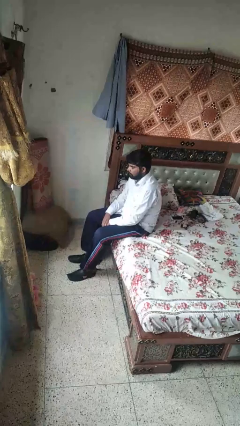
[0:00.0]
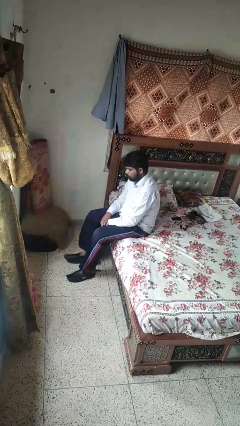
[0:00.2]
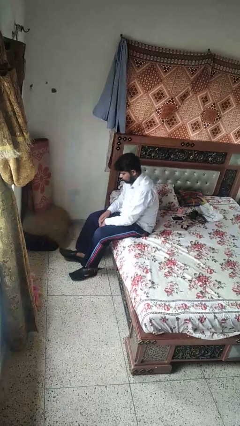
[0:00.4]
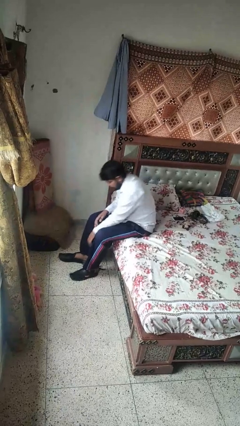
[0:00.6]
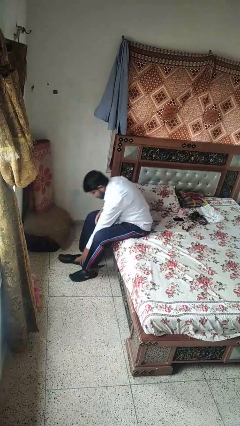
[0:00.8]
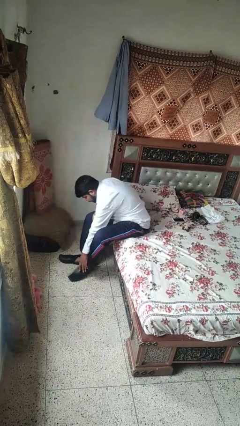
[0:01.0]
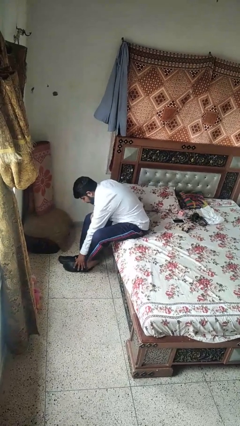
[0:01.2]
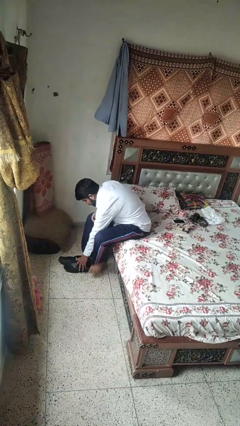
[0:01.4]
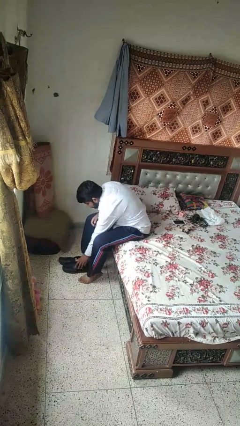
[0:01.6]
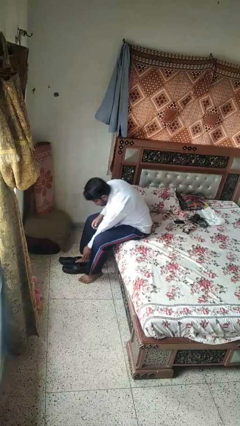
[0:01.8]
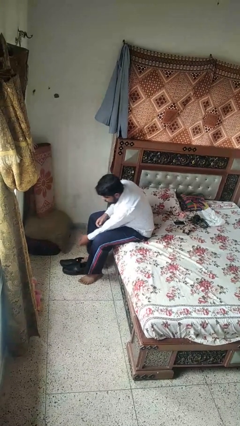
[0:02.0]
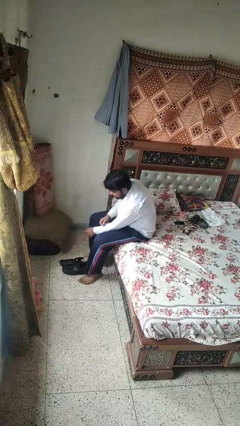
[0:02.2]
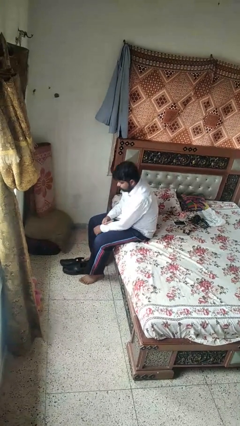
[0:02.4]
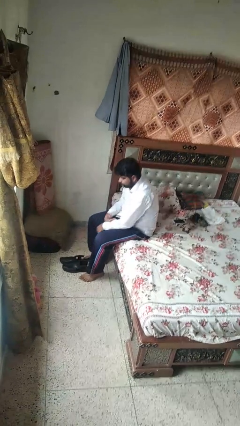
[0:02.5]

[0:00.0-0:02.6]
person takes off shoes

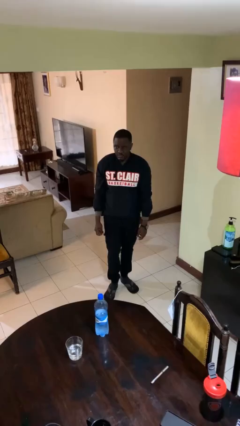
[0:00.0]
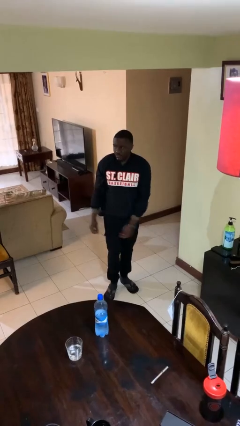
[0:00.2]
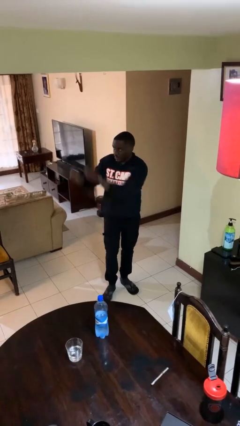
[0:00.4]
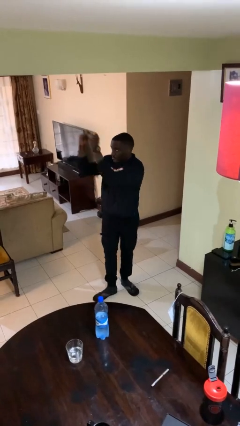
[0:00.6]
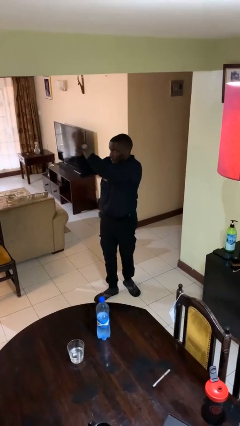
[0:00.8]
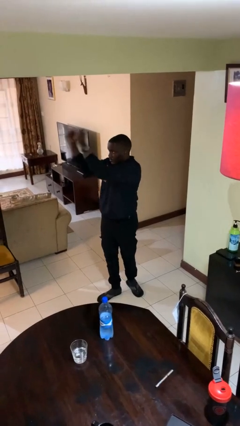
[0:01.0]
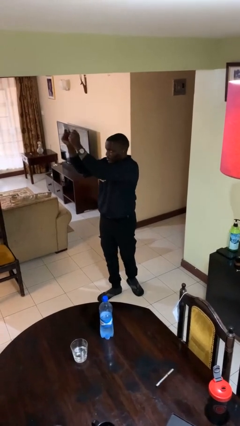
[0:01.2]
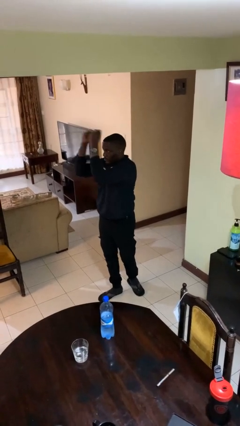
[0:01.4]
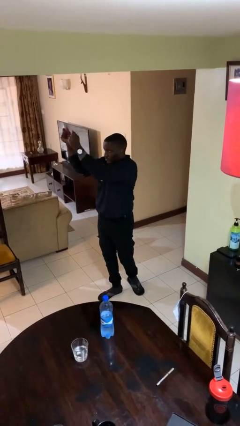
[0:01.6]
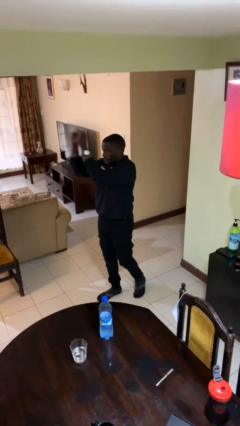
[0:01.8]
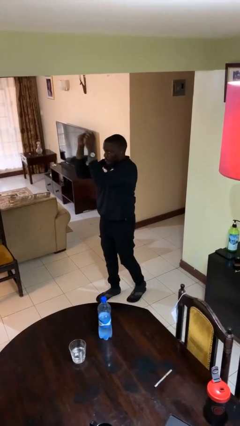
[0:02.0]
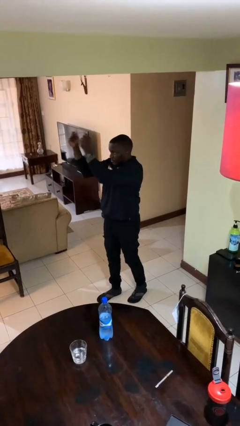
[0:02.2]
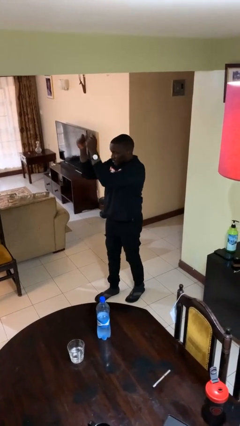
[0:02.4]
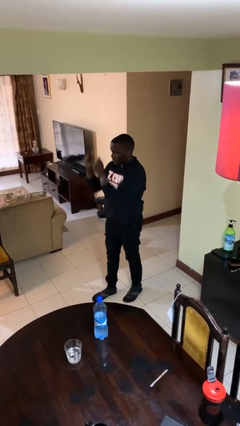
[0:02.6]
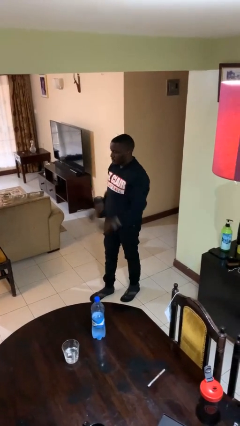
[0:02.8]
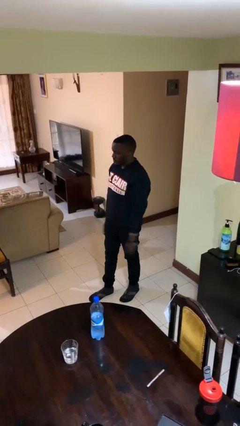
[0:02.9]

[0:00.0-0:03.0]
person snaps fingers

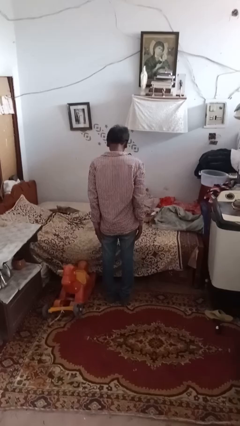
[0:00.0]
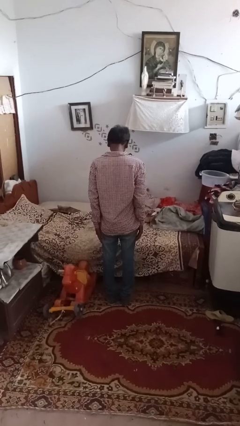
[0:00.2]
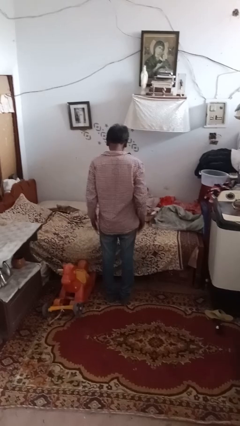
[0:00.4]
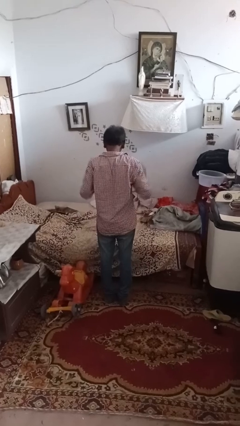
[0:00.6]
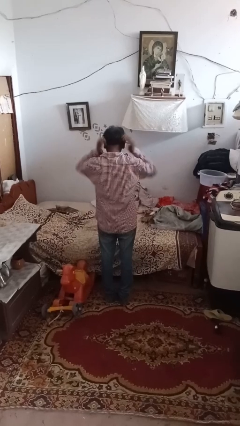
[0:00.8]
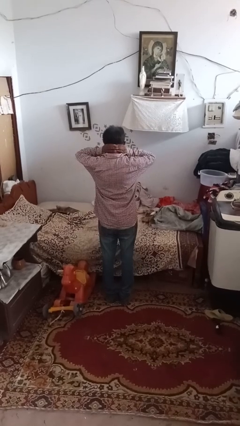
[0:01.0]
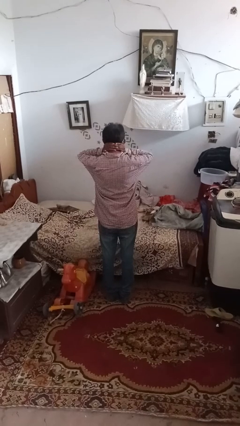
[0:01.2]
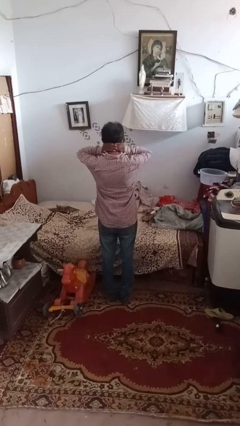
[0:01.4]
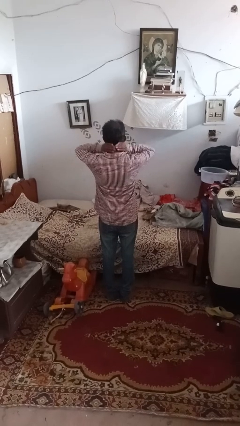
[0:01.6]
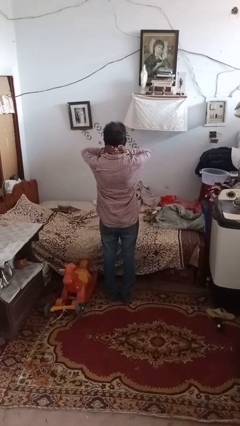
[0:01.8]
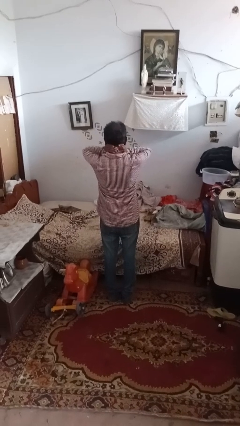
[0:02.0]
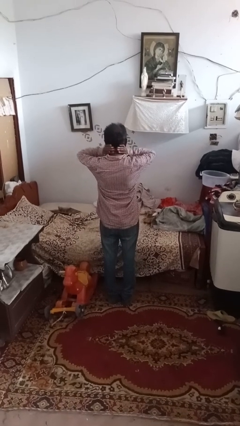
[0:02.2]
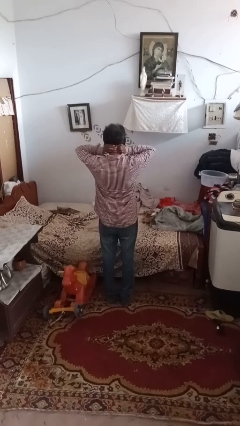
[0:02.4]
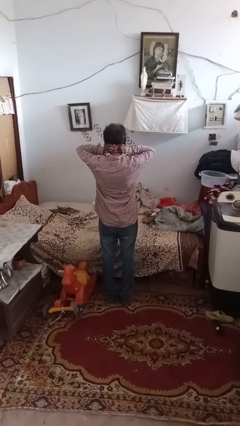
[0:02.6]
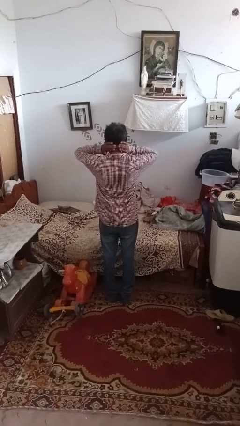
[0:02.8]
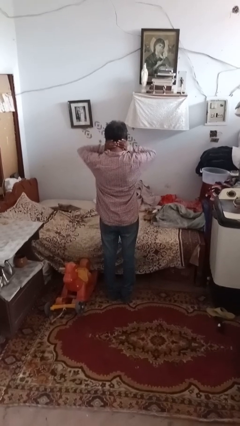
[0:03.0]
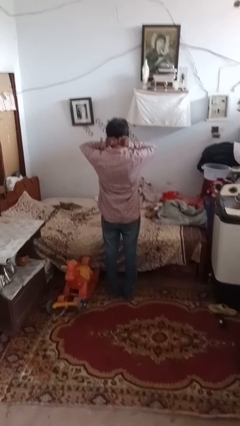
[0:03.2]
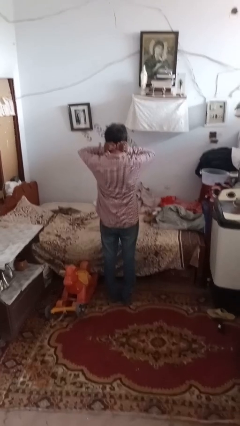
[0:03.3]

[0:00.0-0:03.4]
person rubs neck

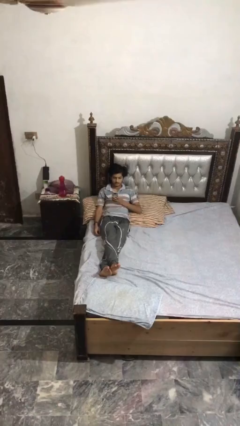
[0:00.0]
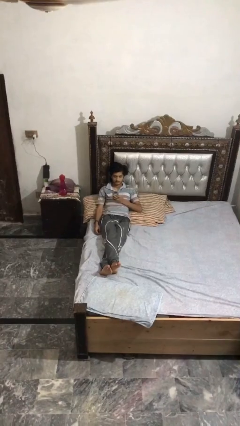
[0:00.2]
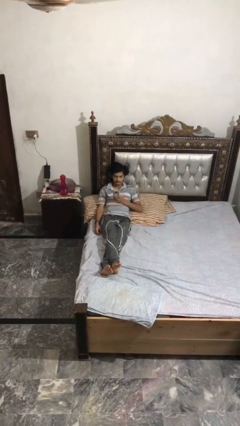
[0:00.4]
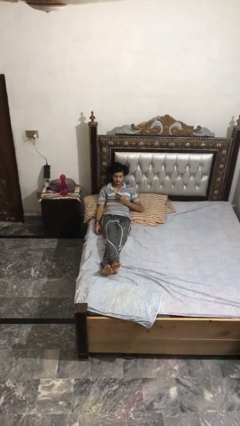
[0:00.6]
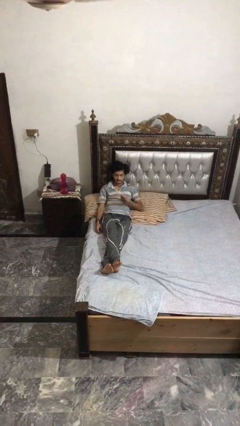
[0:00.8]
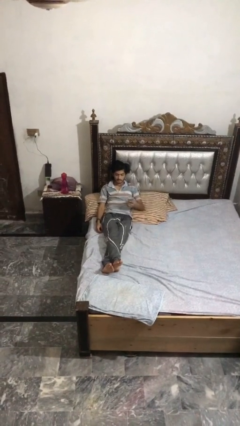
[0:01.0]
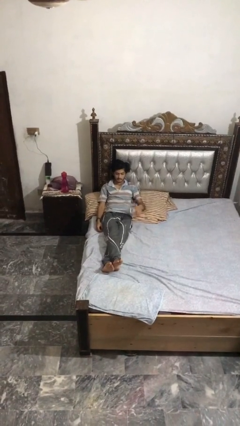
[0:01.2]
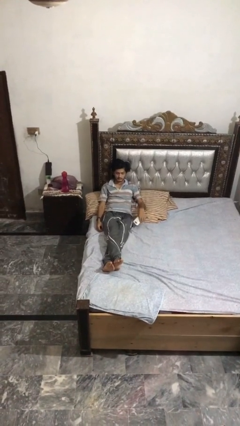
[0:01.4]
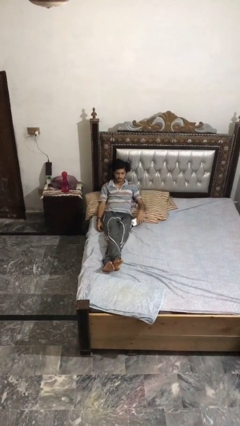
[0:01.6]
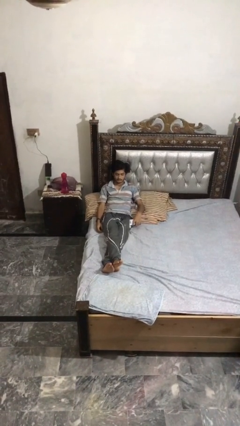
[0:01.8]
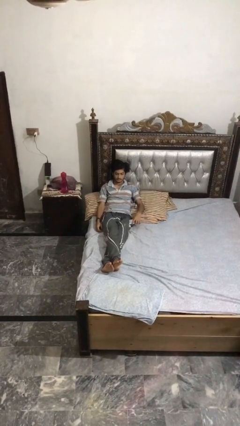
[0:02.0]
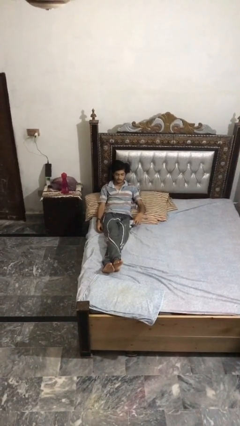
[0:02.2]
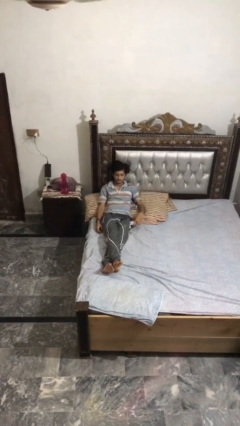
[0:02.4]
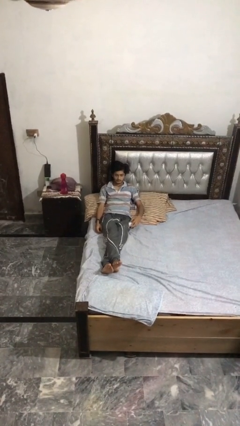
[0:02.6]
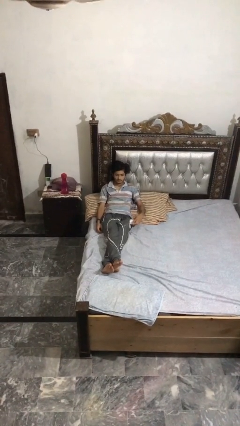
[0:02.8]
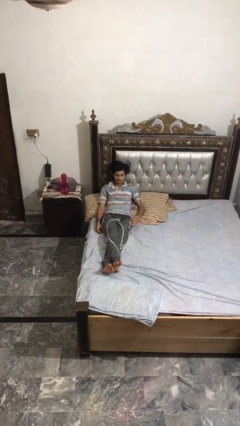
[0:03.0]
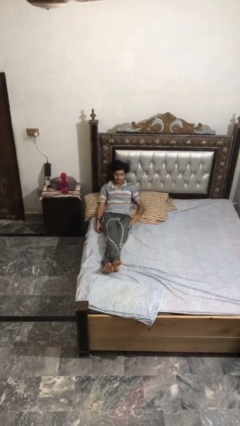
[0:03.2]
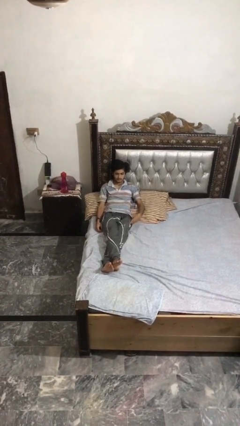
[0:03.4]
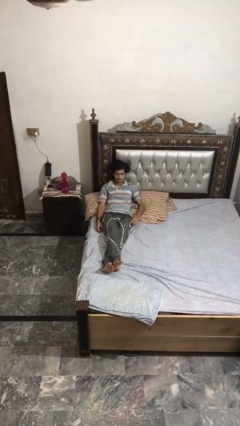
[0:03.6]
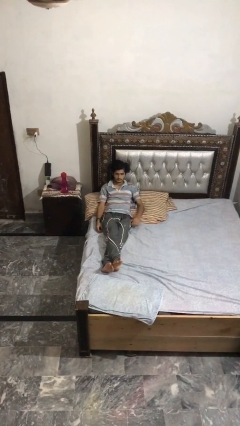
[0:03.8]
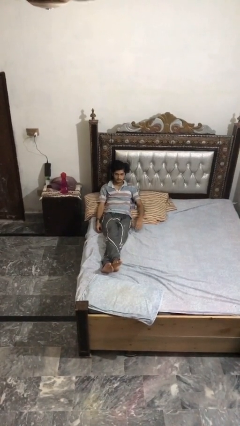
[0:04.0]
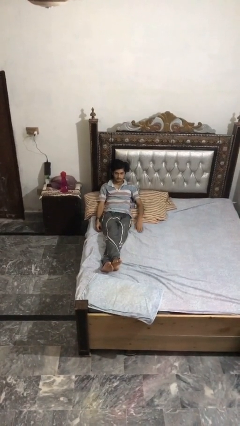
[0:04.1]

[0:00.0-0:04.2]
person puts phone into pocket

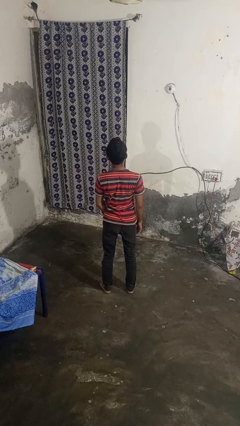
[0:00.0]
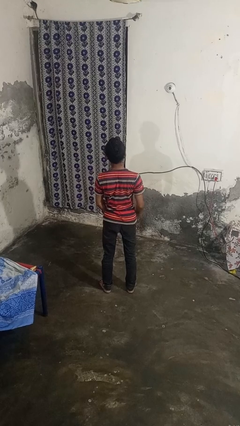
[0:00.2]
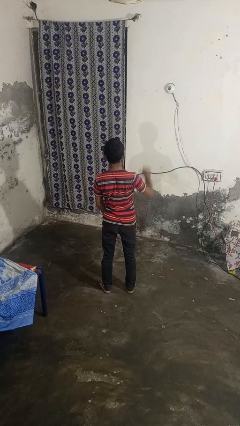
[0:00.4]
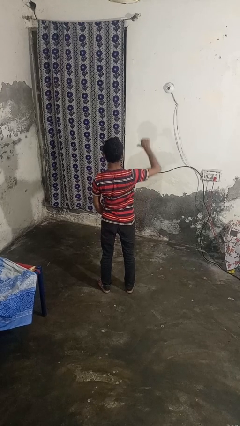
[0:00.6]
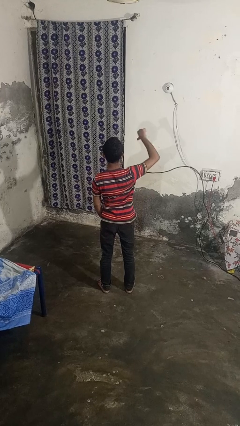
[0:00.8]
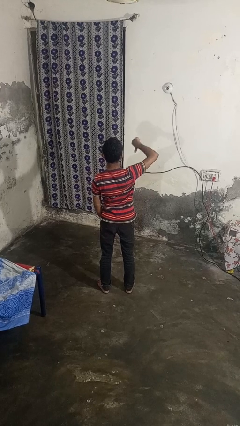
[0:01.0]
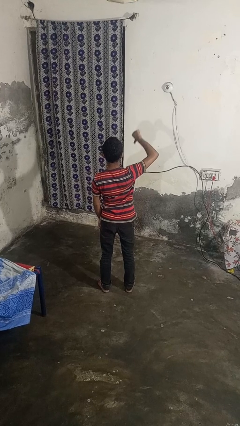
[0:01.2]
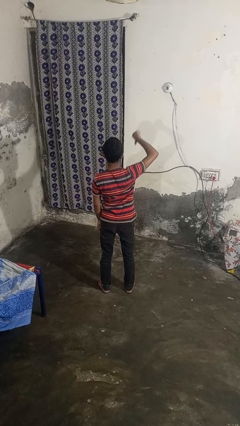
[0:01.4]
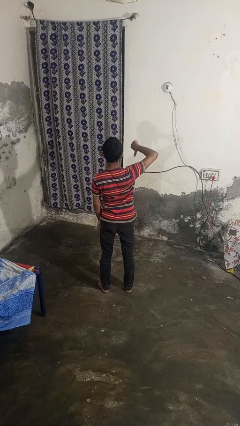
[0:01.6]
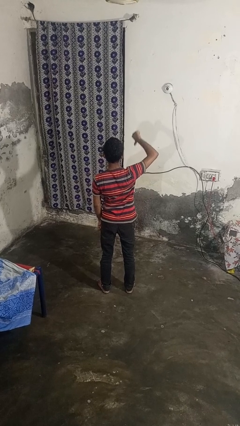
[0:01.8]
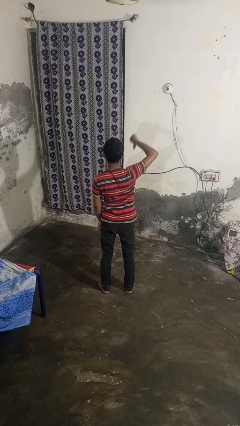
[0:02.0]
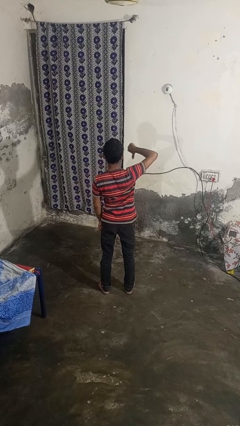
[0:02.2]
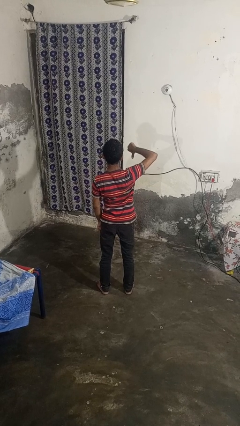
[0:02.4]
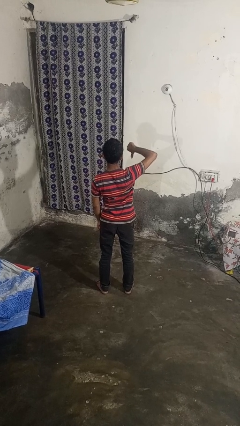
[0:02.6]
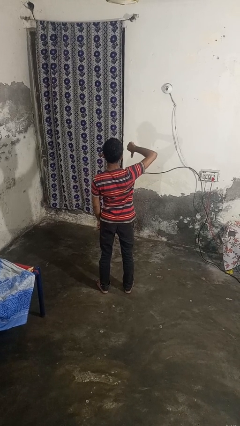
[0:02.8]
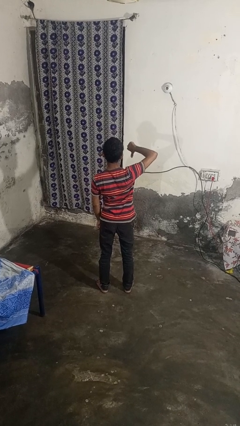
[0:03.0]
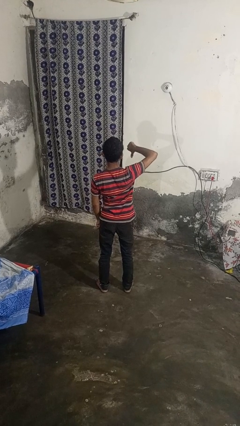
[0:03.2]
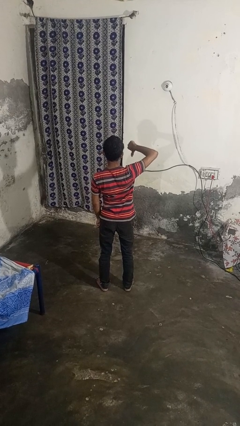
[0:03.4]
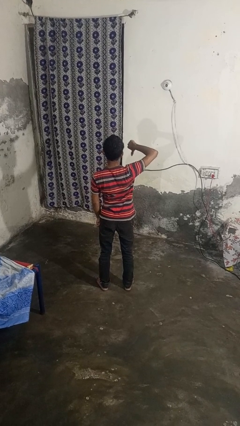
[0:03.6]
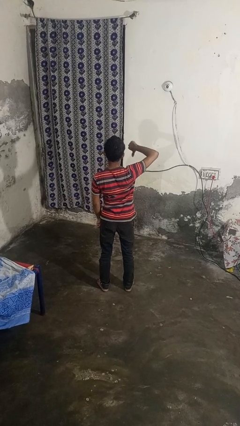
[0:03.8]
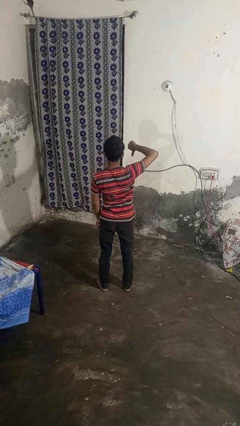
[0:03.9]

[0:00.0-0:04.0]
person gestures thumbs down
